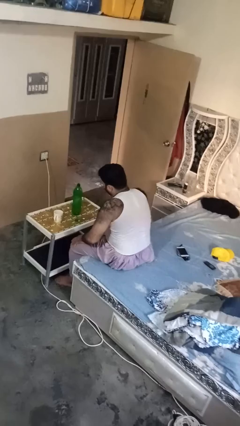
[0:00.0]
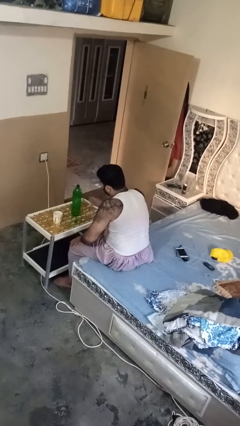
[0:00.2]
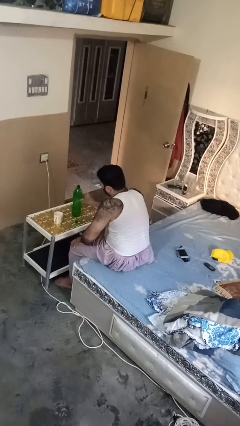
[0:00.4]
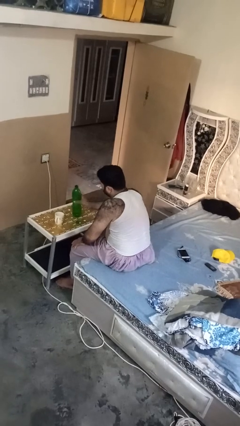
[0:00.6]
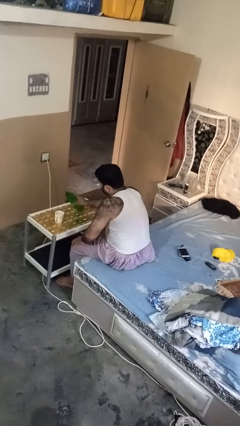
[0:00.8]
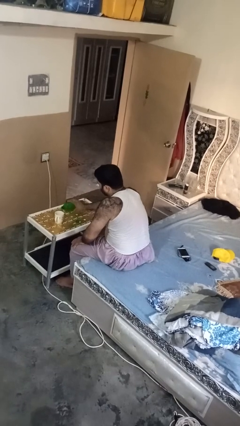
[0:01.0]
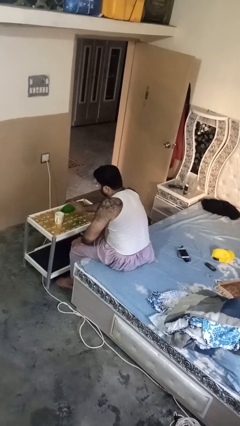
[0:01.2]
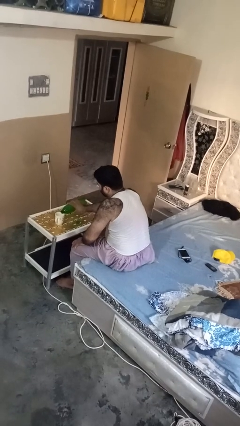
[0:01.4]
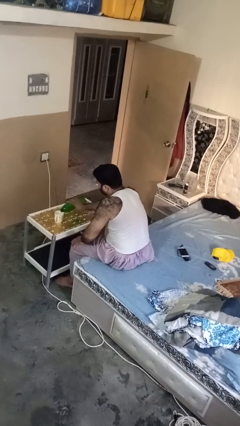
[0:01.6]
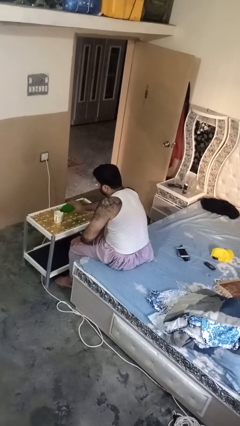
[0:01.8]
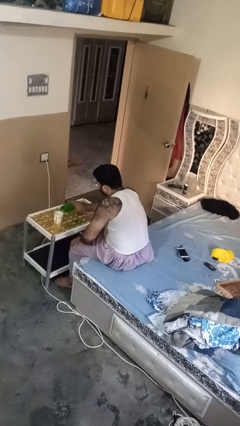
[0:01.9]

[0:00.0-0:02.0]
person pours liquid into cup

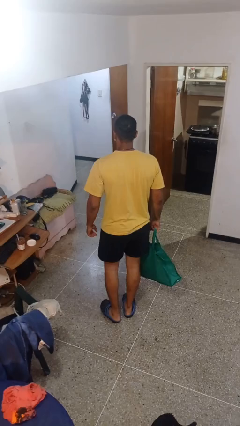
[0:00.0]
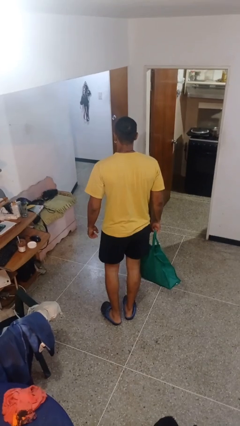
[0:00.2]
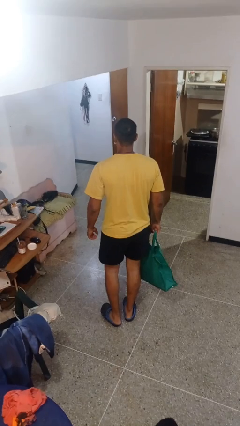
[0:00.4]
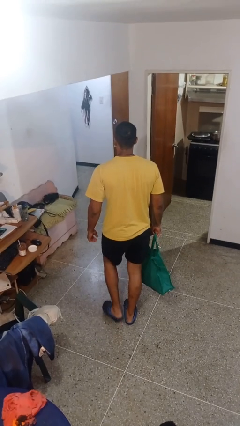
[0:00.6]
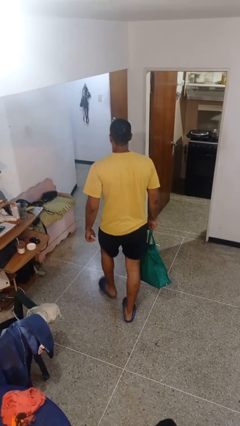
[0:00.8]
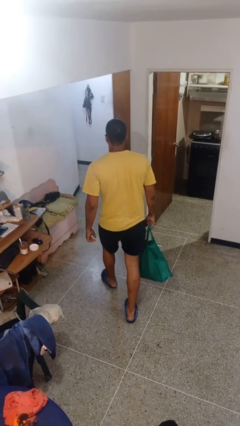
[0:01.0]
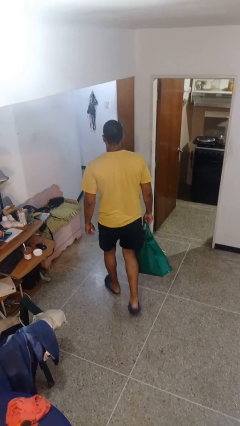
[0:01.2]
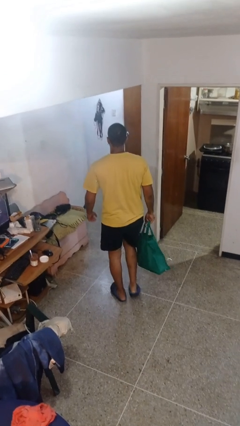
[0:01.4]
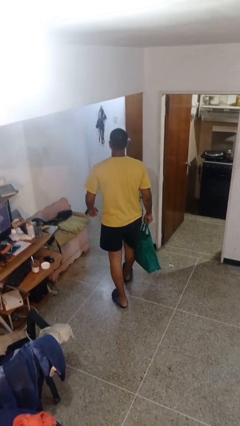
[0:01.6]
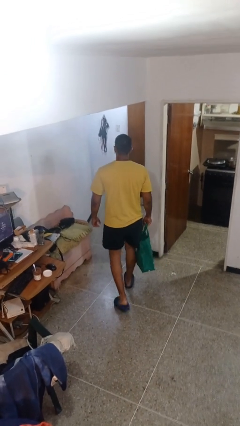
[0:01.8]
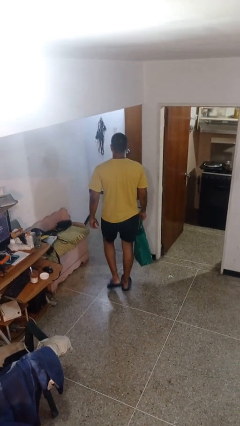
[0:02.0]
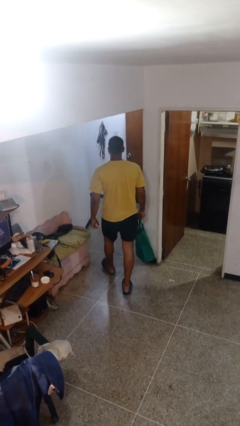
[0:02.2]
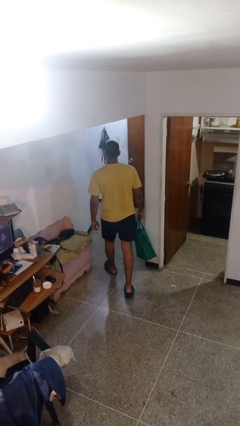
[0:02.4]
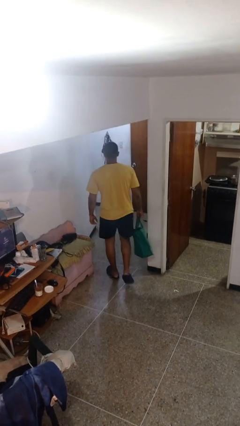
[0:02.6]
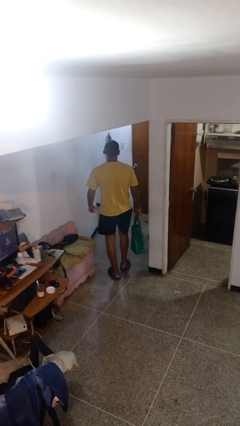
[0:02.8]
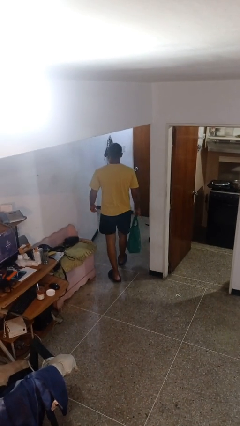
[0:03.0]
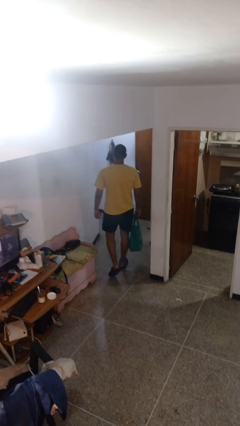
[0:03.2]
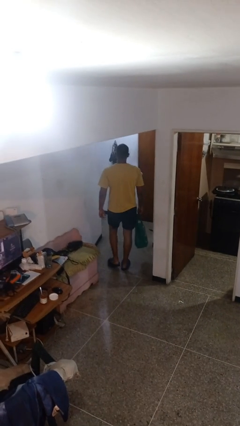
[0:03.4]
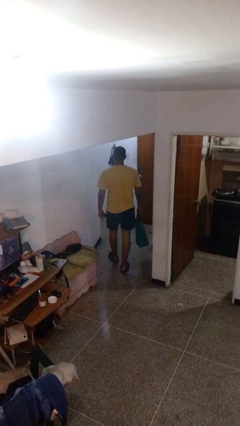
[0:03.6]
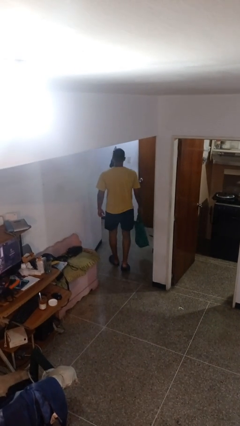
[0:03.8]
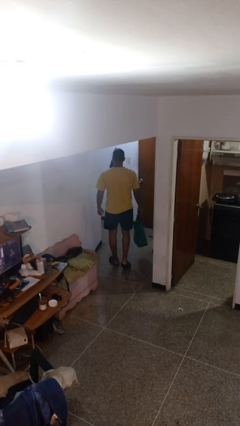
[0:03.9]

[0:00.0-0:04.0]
person carries groceries

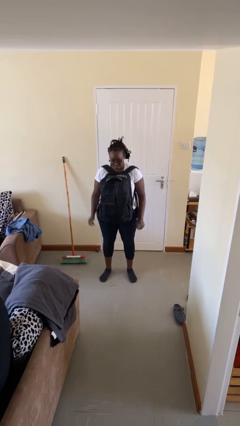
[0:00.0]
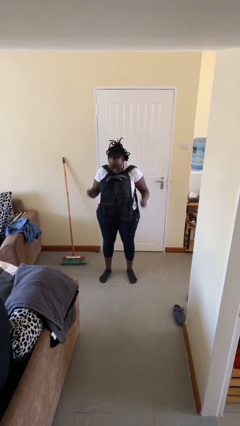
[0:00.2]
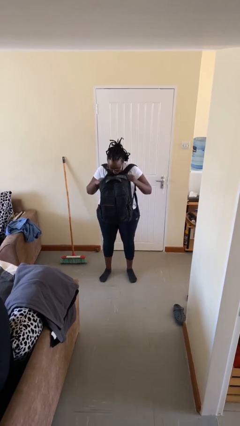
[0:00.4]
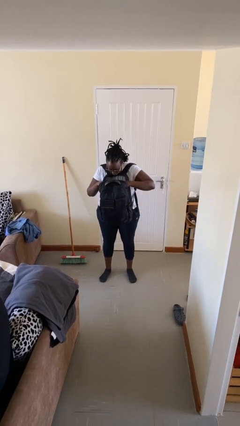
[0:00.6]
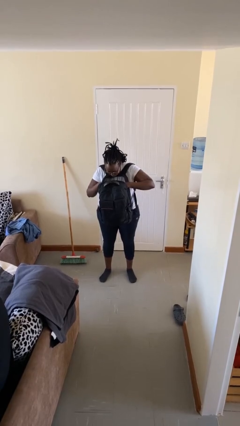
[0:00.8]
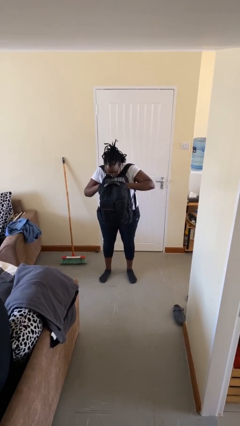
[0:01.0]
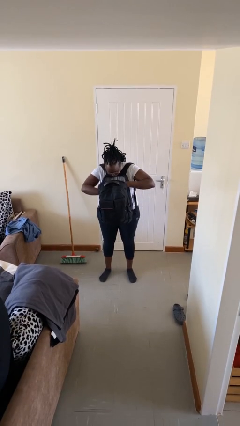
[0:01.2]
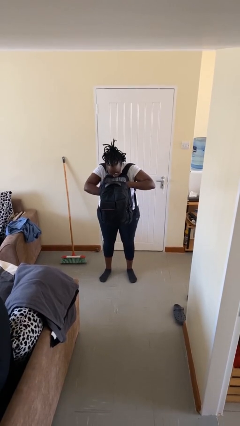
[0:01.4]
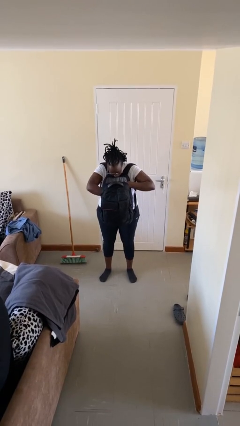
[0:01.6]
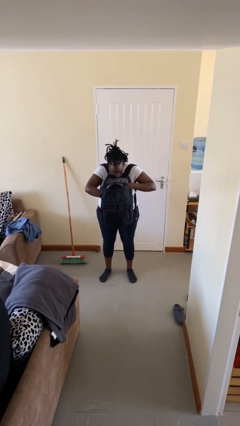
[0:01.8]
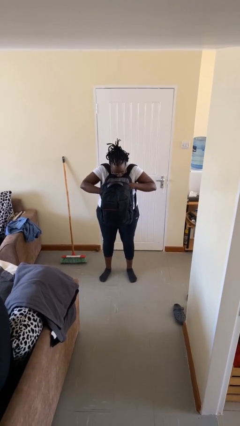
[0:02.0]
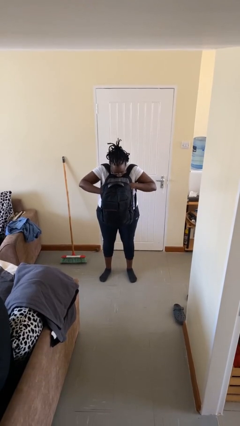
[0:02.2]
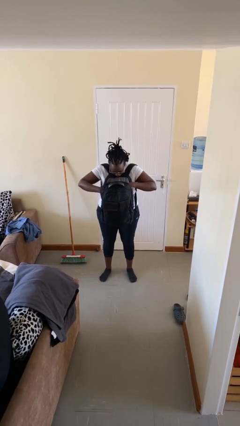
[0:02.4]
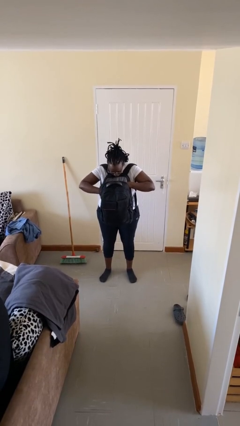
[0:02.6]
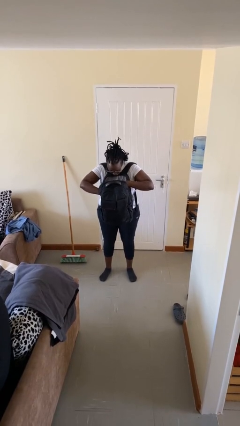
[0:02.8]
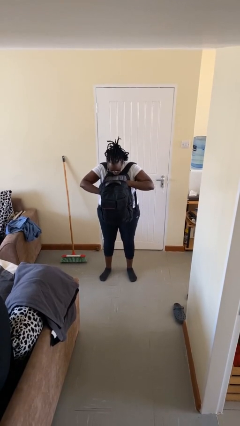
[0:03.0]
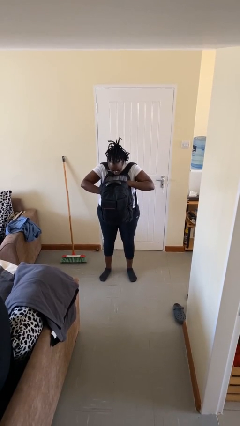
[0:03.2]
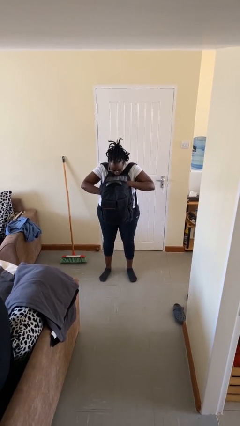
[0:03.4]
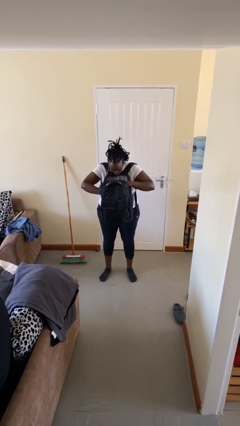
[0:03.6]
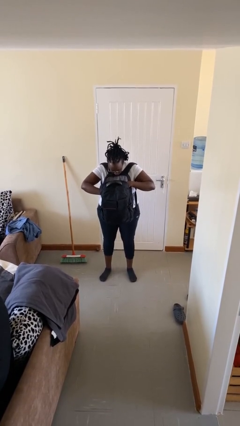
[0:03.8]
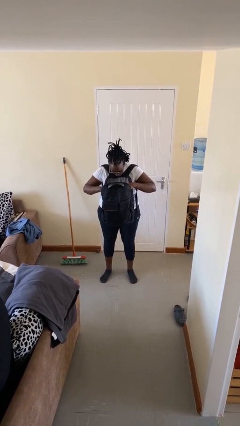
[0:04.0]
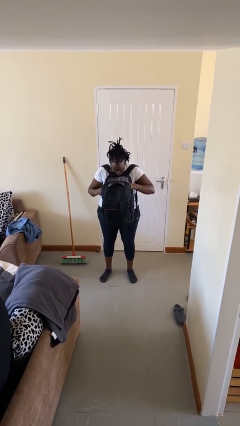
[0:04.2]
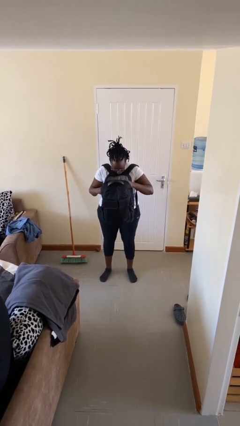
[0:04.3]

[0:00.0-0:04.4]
person searches in backpack

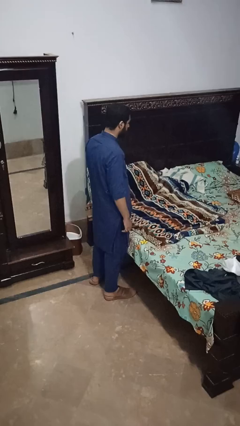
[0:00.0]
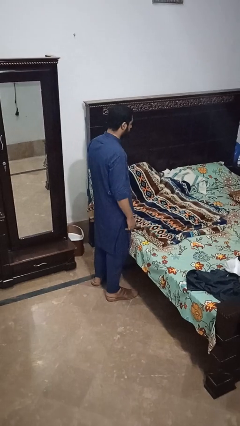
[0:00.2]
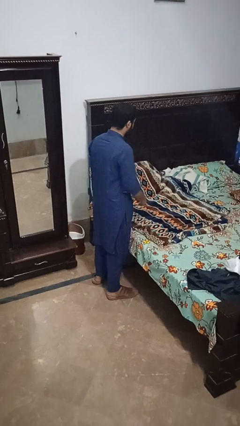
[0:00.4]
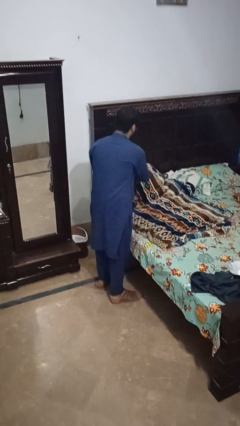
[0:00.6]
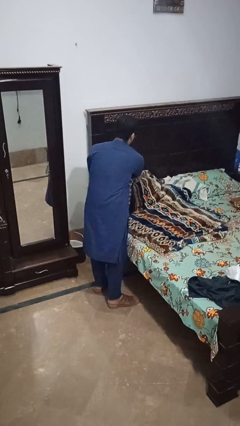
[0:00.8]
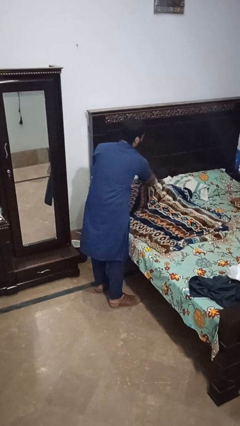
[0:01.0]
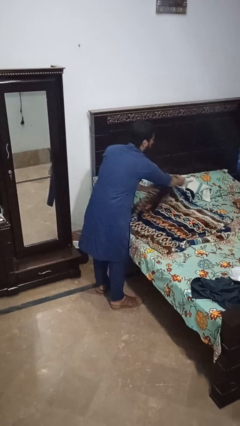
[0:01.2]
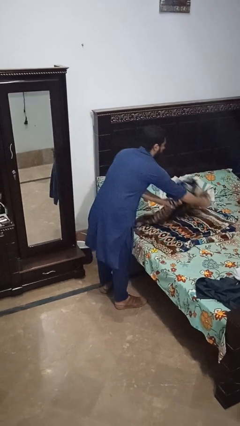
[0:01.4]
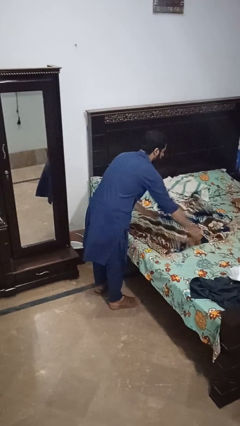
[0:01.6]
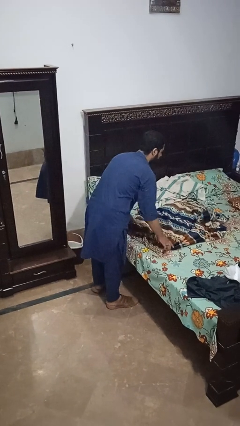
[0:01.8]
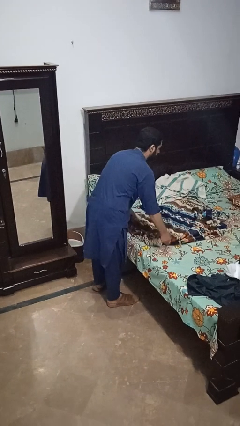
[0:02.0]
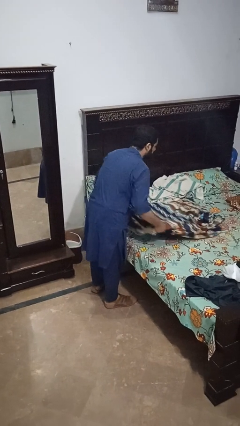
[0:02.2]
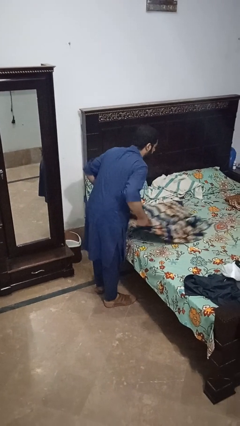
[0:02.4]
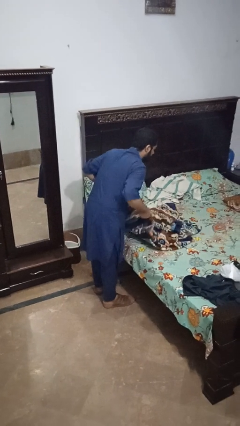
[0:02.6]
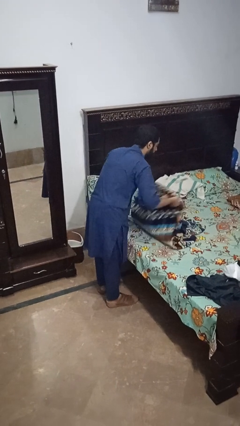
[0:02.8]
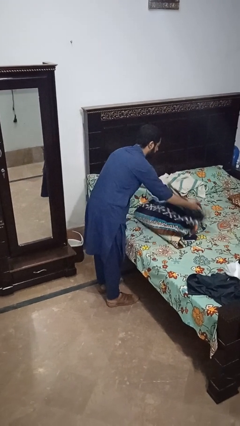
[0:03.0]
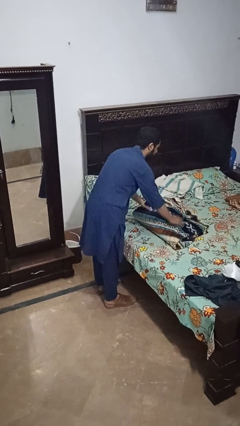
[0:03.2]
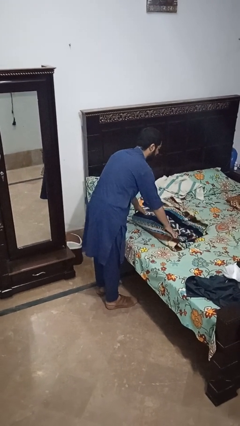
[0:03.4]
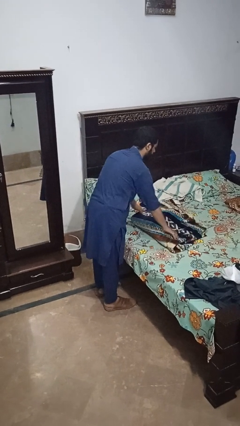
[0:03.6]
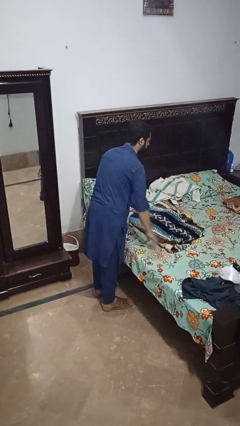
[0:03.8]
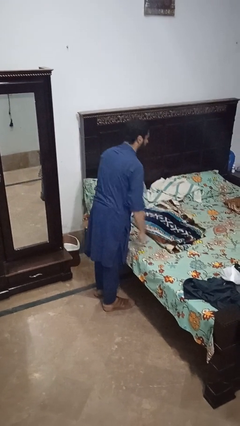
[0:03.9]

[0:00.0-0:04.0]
person folds blanket

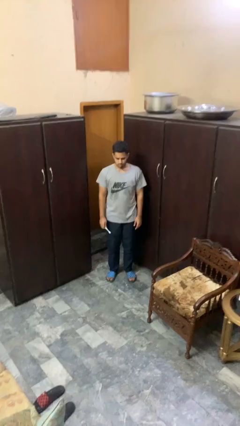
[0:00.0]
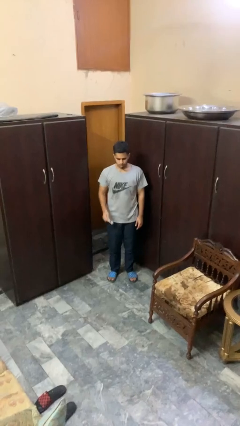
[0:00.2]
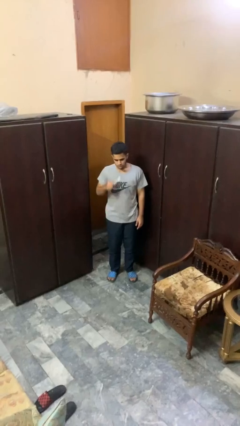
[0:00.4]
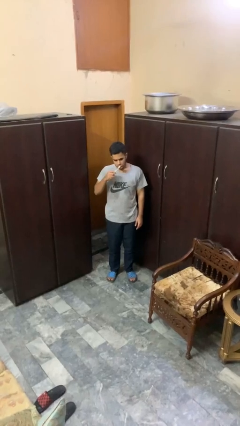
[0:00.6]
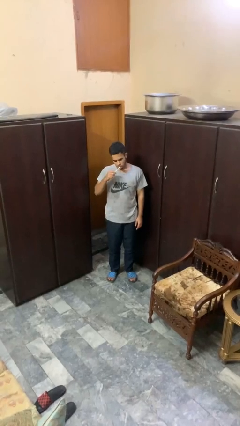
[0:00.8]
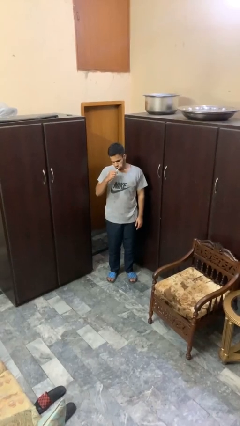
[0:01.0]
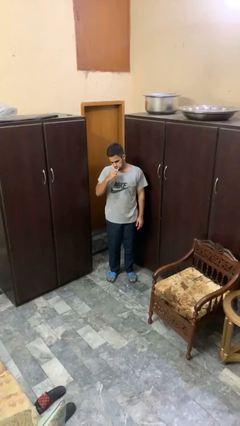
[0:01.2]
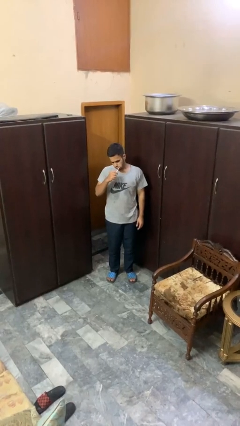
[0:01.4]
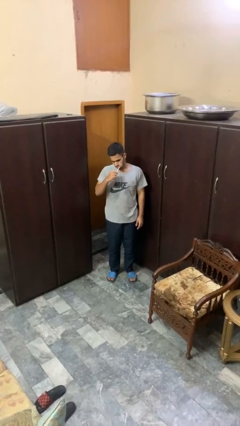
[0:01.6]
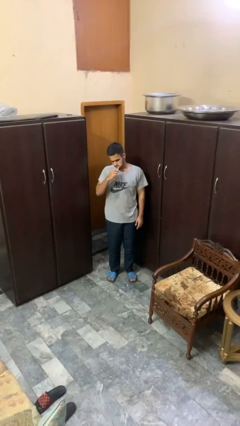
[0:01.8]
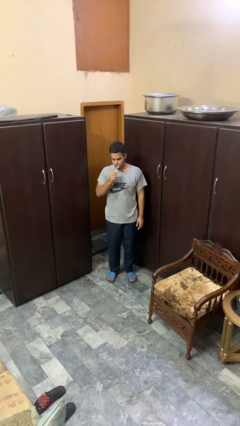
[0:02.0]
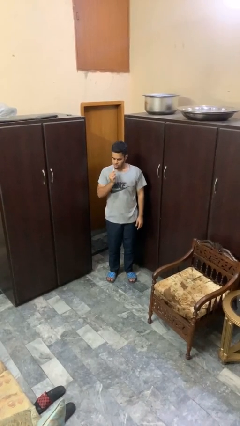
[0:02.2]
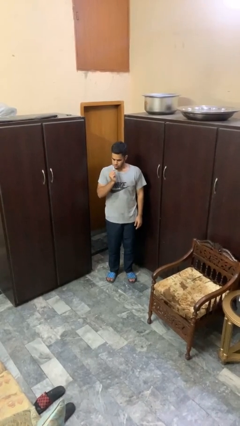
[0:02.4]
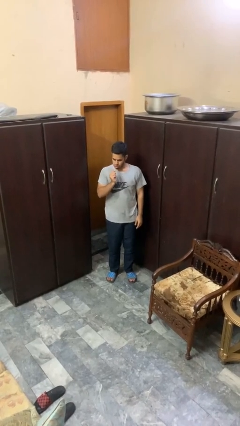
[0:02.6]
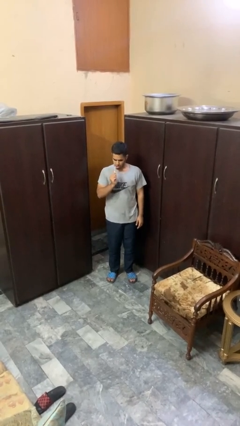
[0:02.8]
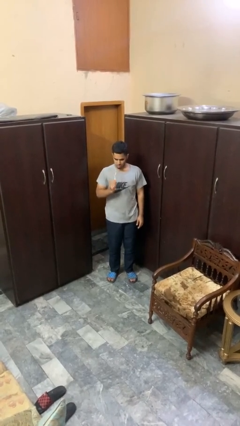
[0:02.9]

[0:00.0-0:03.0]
person brushes teeth

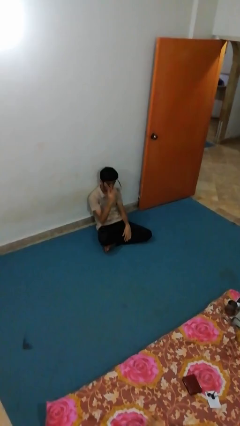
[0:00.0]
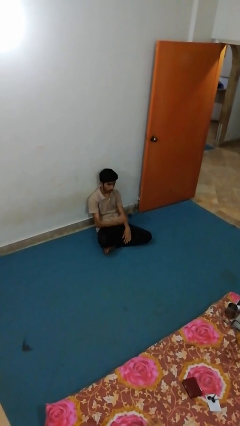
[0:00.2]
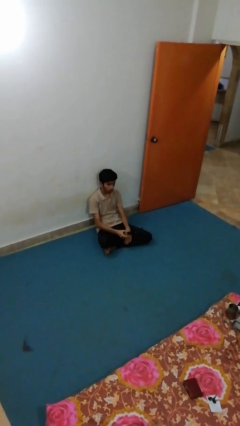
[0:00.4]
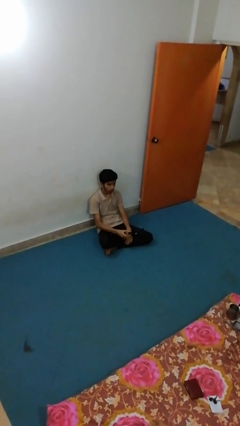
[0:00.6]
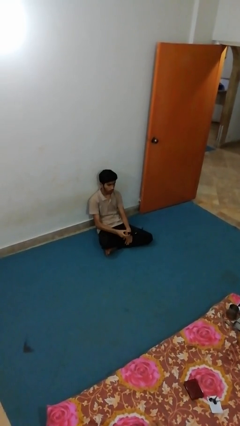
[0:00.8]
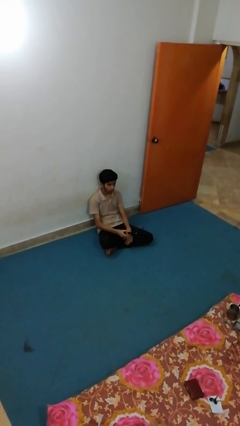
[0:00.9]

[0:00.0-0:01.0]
person takes off sunglasses
